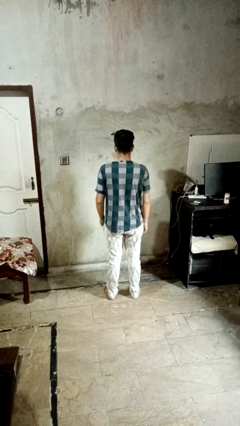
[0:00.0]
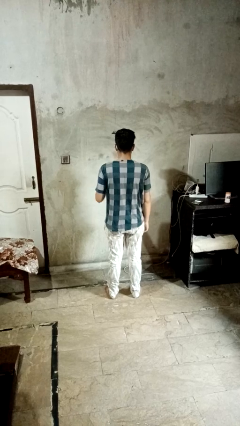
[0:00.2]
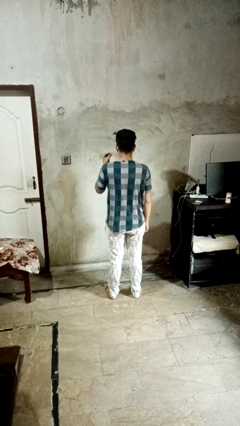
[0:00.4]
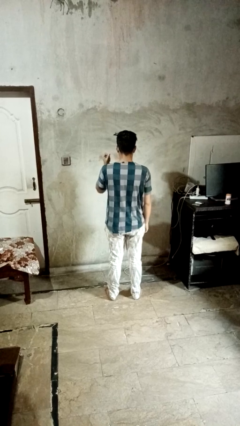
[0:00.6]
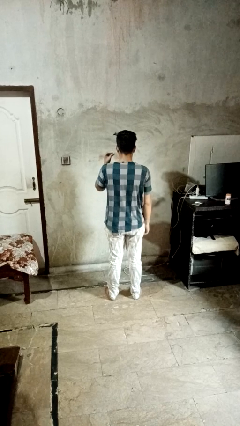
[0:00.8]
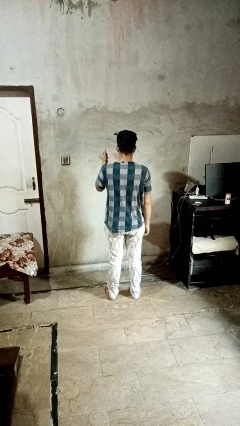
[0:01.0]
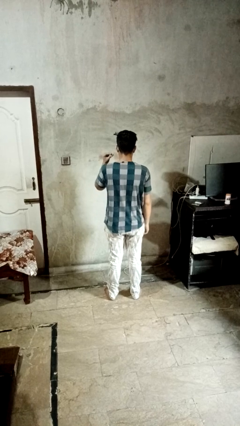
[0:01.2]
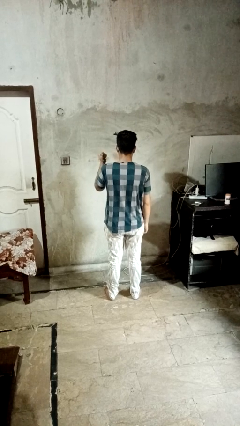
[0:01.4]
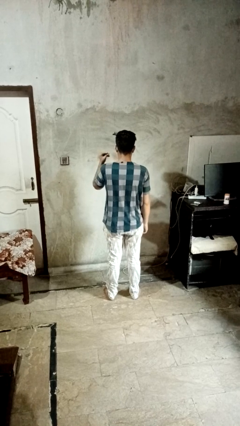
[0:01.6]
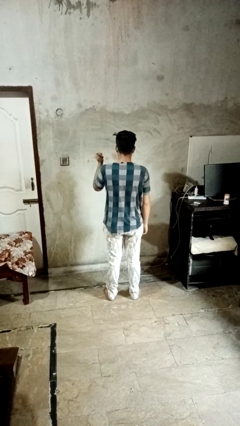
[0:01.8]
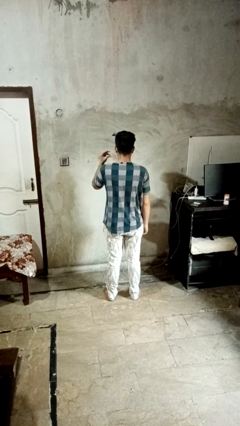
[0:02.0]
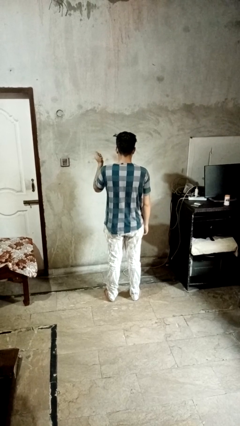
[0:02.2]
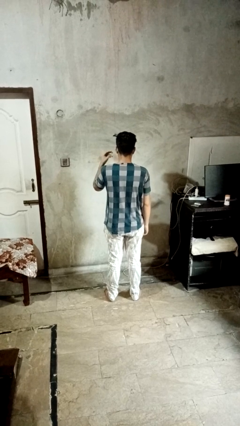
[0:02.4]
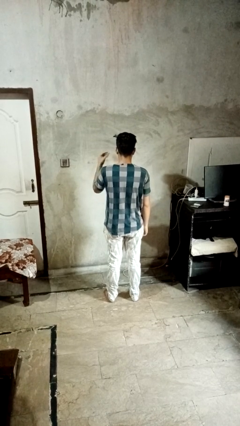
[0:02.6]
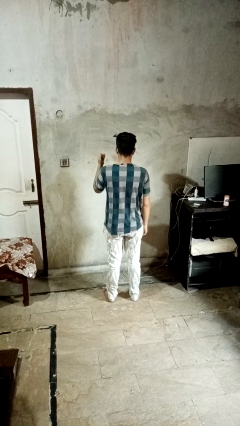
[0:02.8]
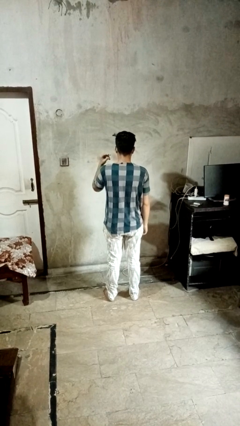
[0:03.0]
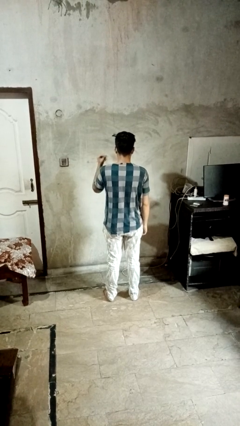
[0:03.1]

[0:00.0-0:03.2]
person snaps fingers

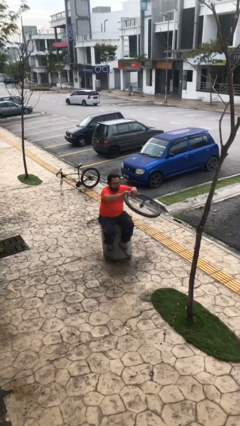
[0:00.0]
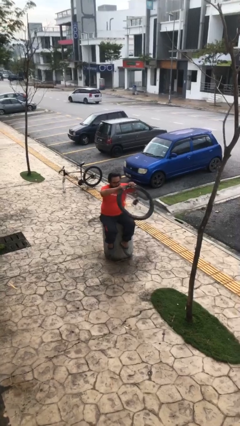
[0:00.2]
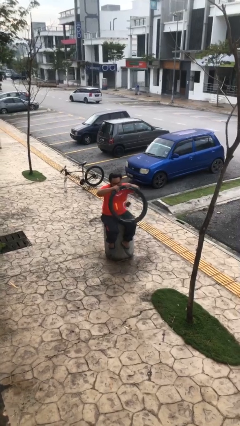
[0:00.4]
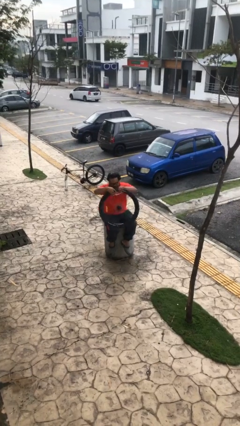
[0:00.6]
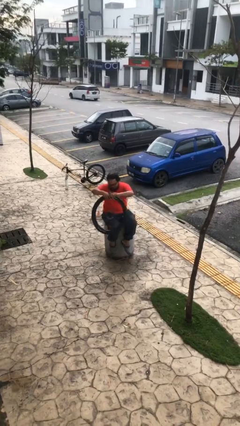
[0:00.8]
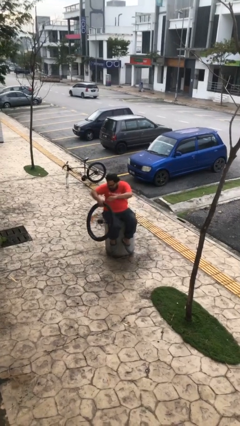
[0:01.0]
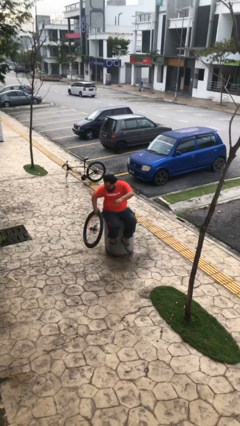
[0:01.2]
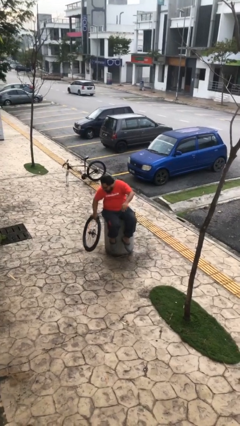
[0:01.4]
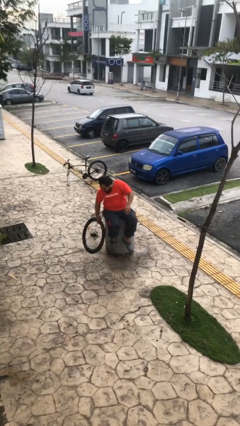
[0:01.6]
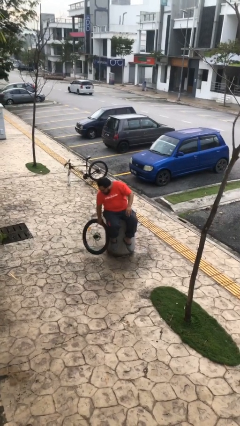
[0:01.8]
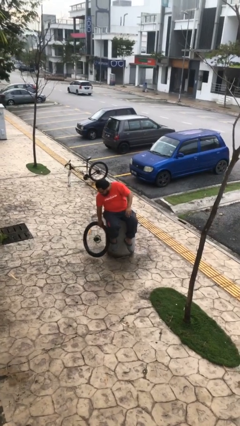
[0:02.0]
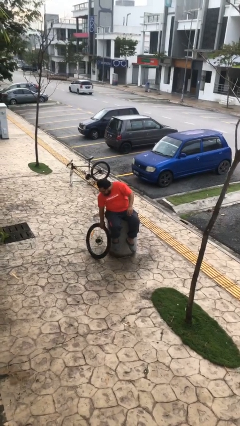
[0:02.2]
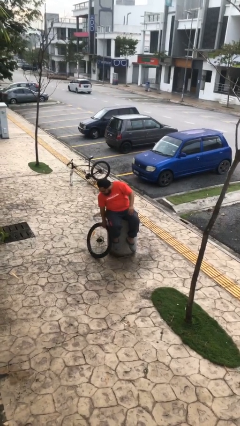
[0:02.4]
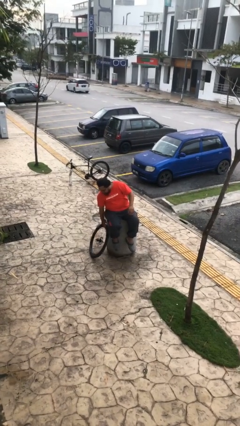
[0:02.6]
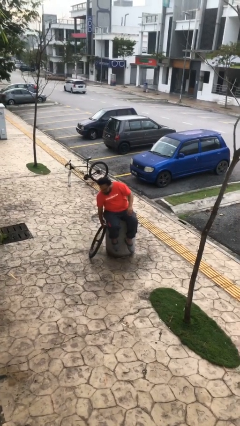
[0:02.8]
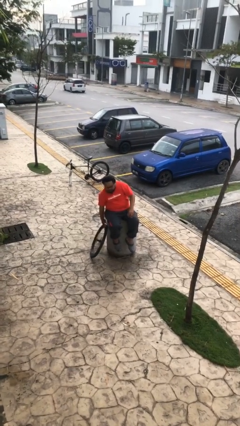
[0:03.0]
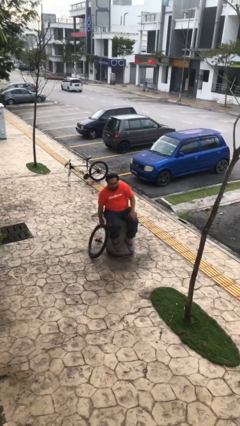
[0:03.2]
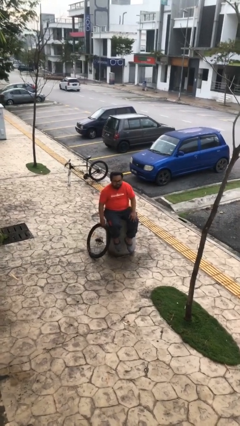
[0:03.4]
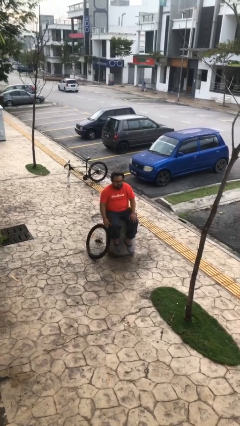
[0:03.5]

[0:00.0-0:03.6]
person puts down object on floor

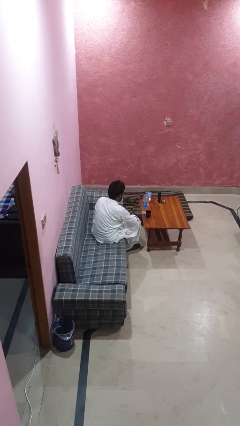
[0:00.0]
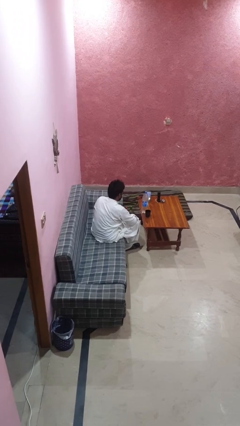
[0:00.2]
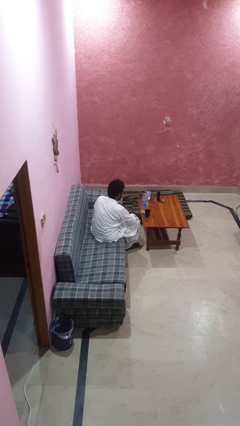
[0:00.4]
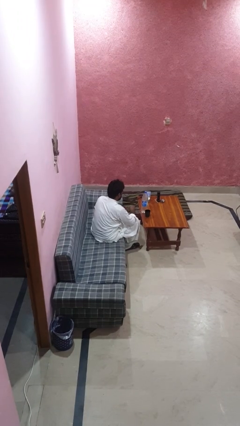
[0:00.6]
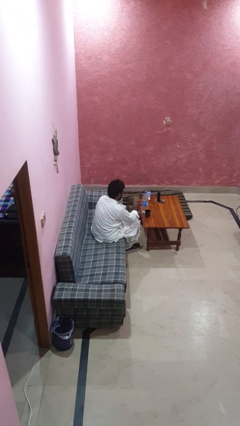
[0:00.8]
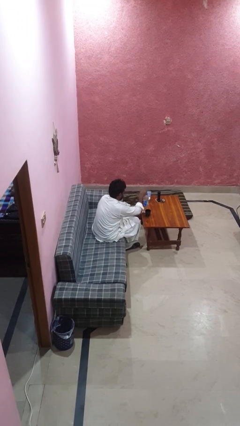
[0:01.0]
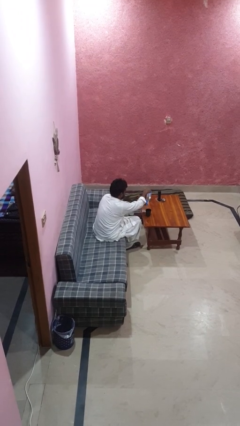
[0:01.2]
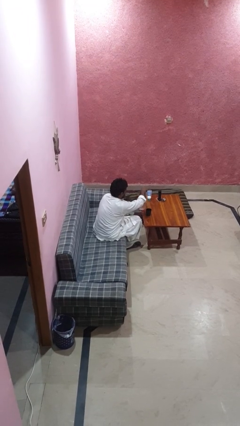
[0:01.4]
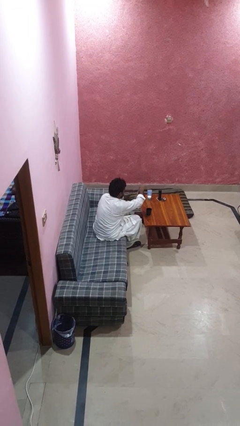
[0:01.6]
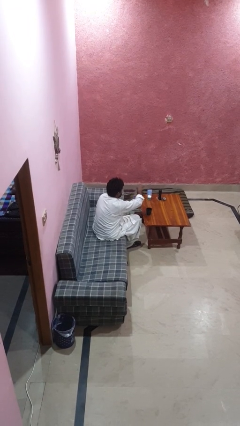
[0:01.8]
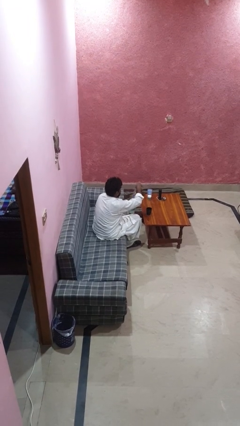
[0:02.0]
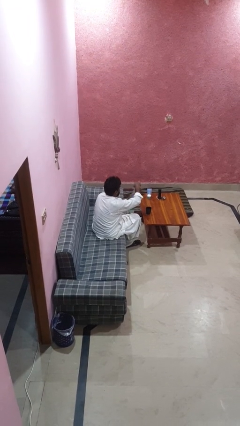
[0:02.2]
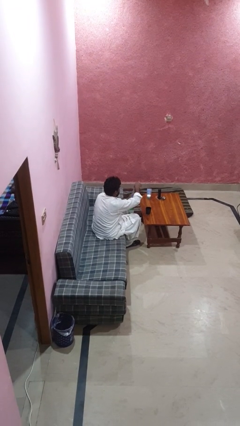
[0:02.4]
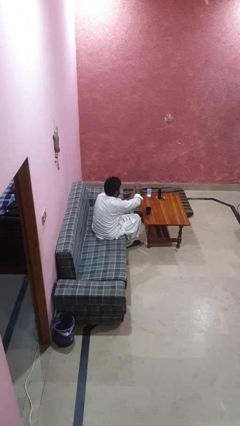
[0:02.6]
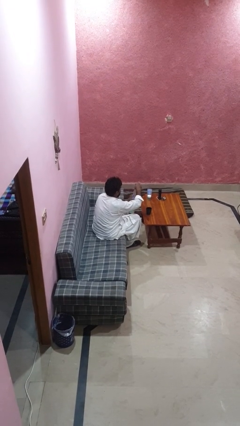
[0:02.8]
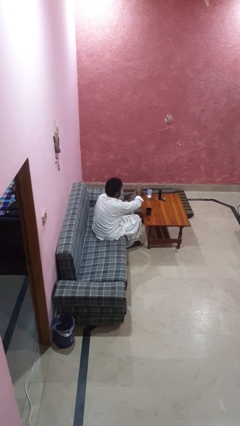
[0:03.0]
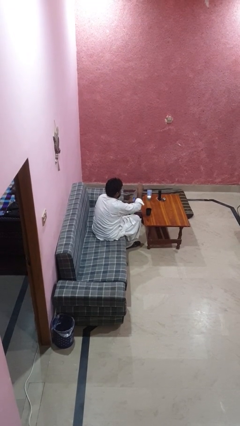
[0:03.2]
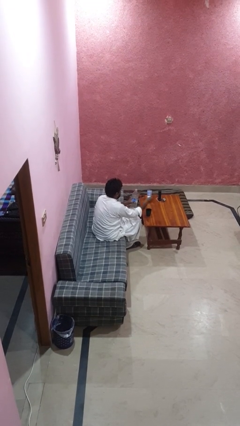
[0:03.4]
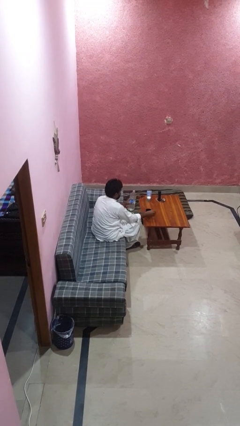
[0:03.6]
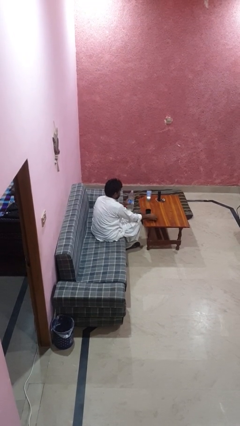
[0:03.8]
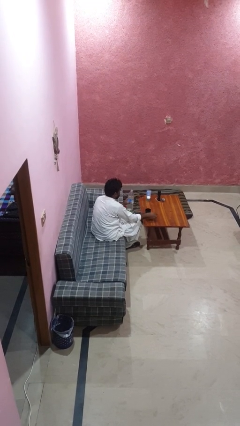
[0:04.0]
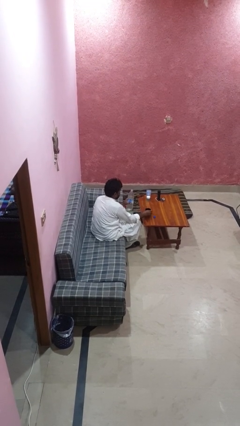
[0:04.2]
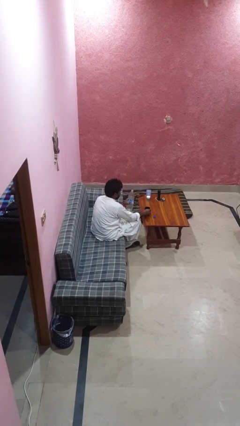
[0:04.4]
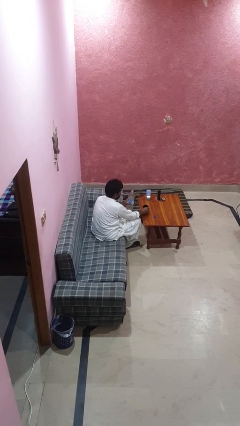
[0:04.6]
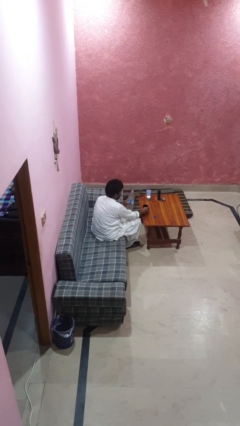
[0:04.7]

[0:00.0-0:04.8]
person unscrews lid from bottle

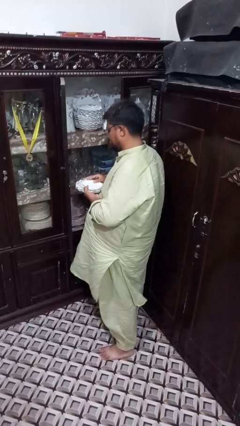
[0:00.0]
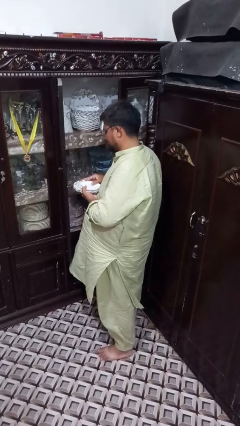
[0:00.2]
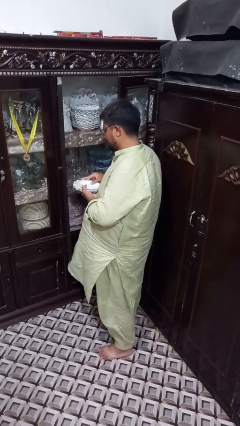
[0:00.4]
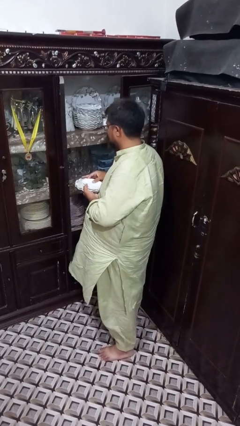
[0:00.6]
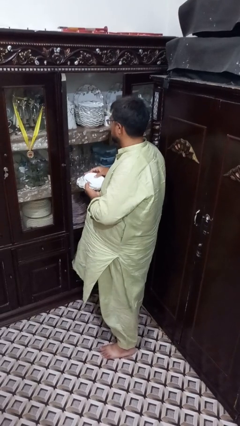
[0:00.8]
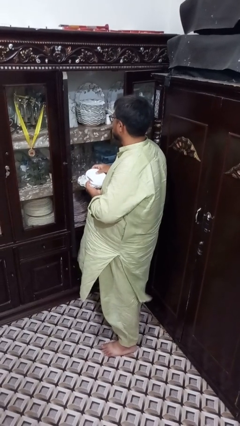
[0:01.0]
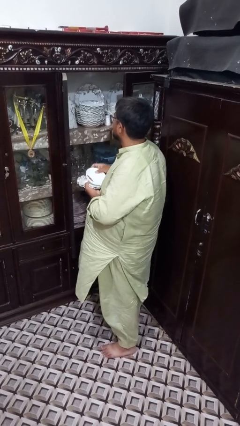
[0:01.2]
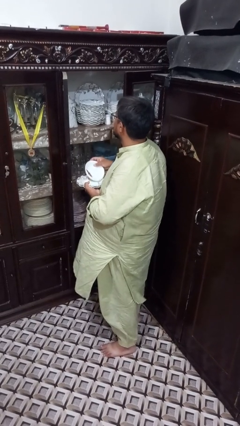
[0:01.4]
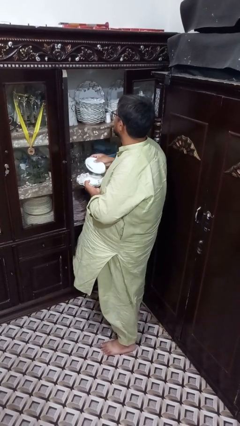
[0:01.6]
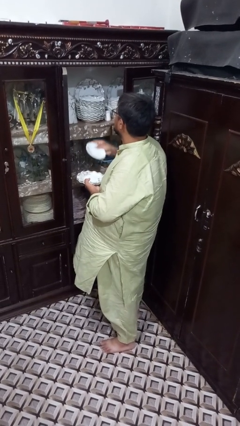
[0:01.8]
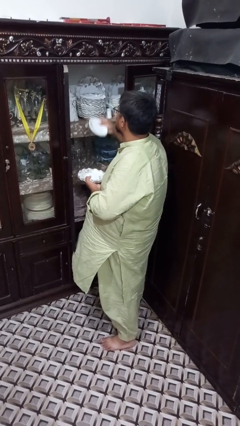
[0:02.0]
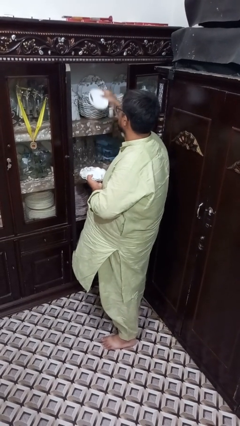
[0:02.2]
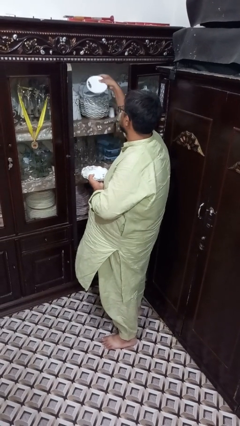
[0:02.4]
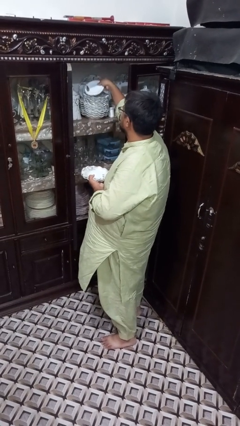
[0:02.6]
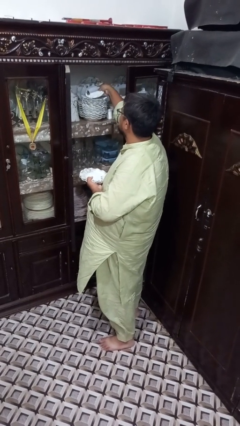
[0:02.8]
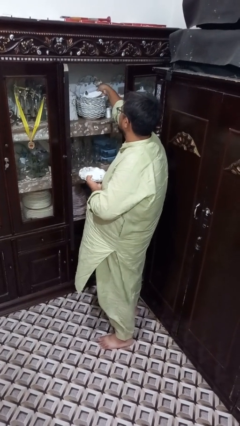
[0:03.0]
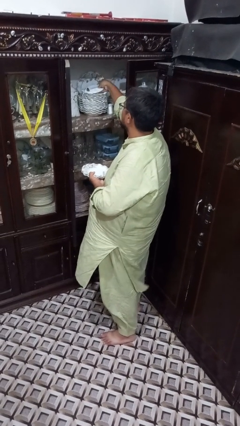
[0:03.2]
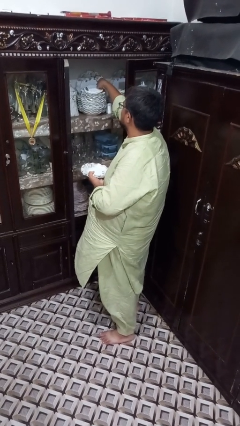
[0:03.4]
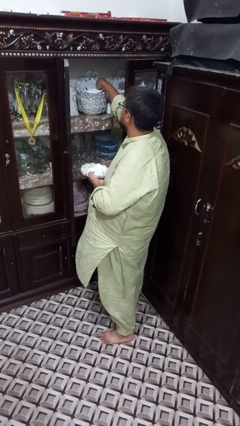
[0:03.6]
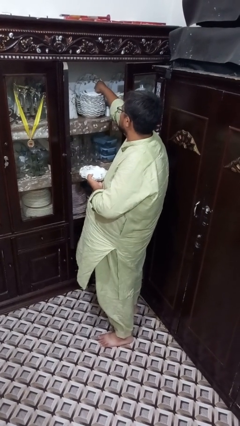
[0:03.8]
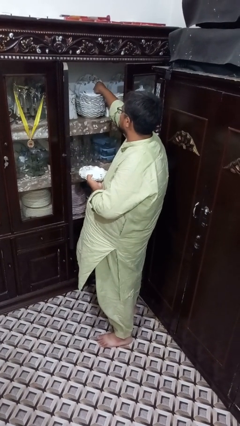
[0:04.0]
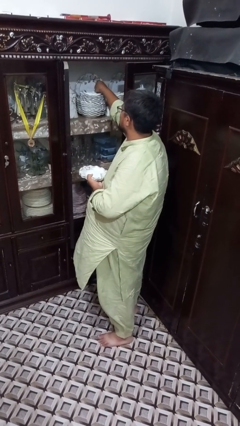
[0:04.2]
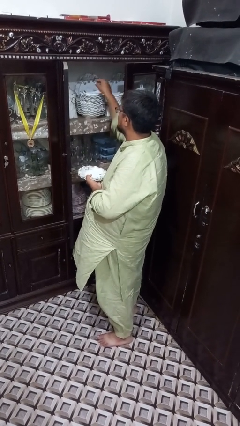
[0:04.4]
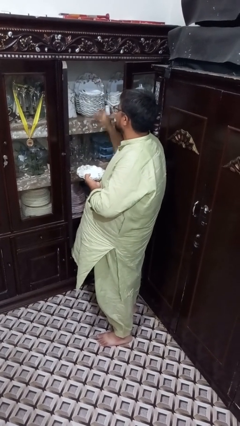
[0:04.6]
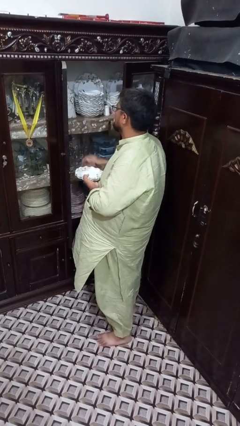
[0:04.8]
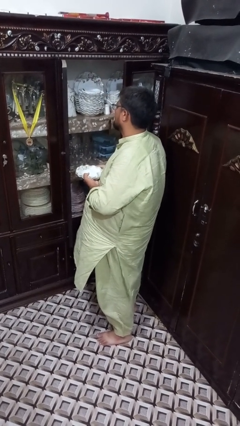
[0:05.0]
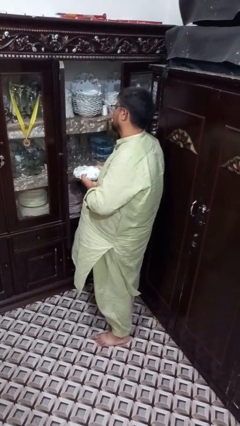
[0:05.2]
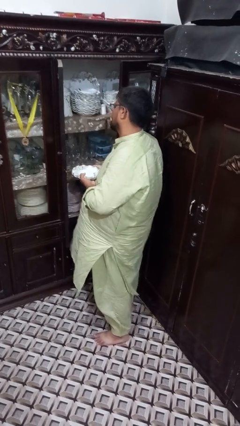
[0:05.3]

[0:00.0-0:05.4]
person loads groceries into cabinet

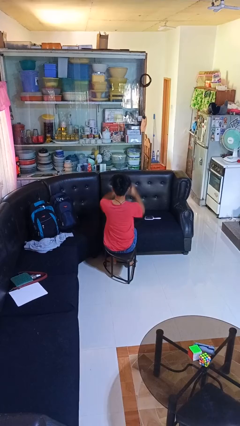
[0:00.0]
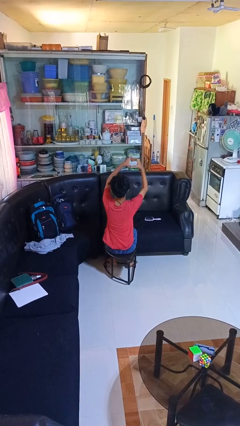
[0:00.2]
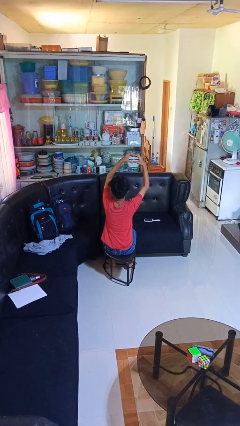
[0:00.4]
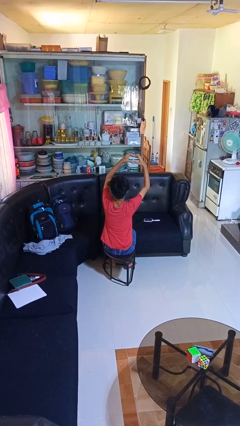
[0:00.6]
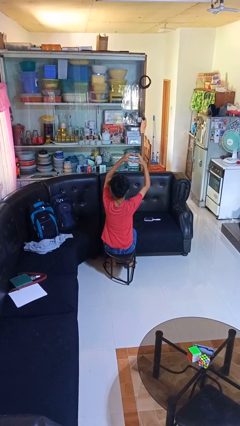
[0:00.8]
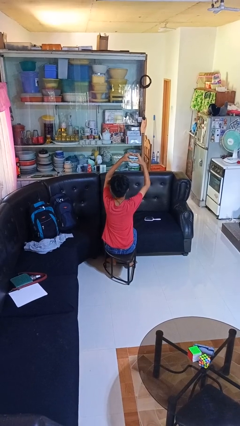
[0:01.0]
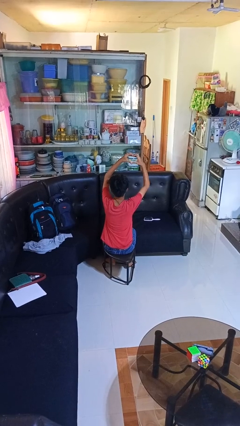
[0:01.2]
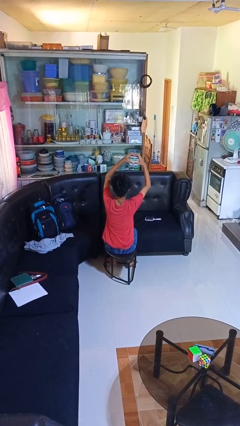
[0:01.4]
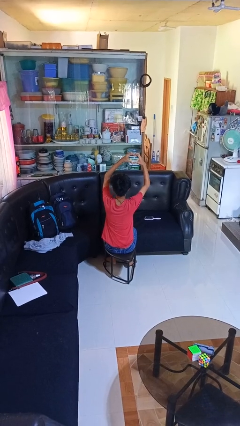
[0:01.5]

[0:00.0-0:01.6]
person gestures heart
